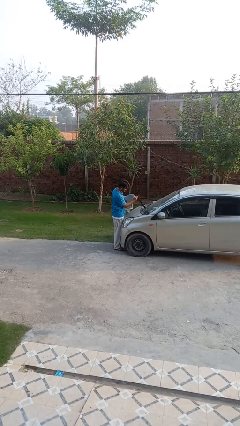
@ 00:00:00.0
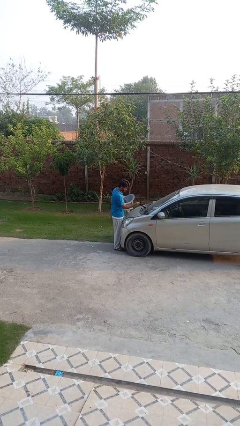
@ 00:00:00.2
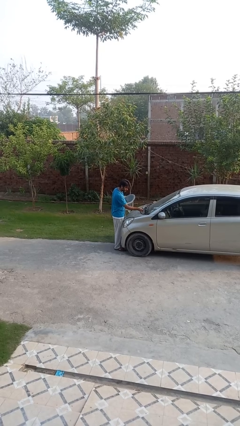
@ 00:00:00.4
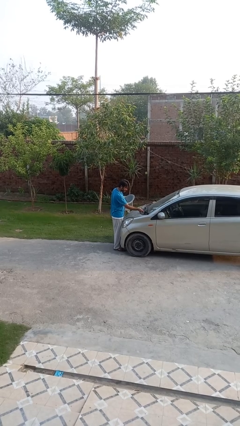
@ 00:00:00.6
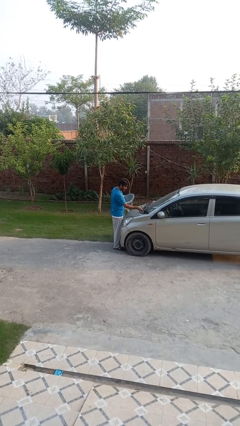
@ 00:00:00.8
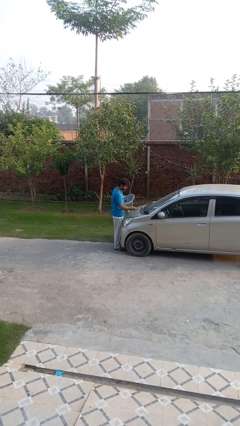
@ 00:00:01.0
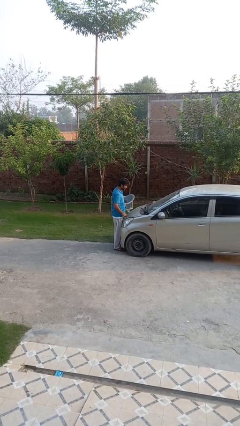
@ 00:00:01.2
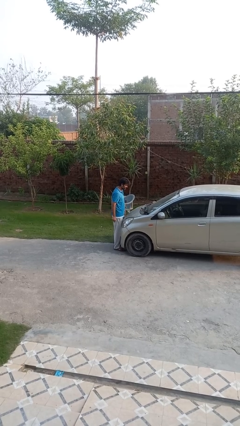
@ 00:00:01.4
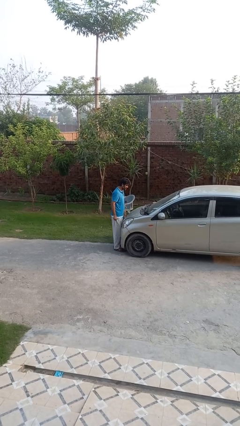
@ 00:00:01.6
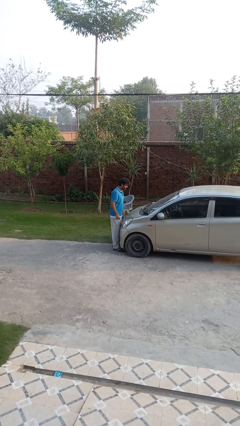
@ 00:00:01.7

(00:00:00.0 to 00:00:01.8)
person flips down car wipers

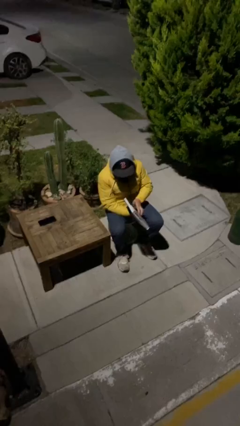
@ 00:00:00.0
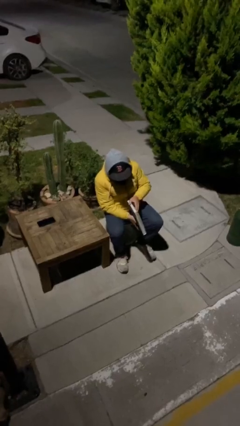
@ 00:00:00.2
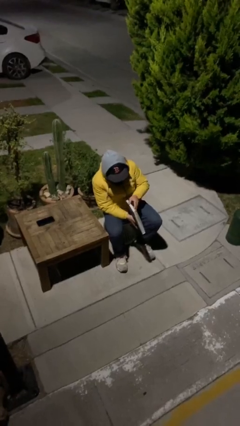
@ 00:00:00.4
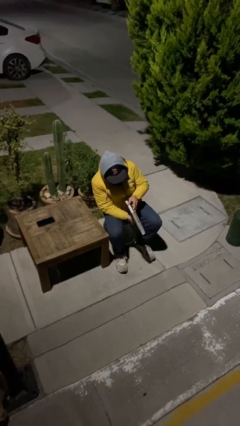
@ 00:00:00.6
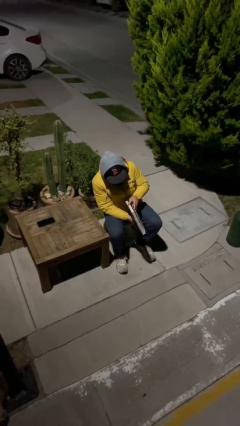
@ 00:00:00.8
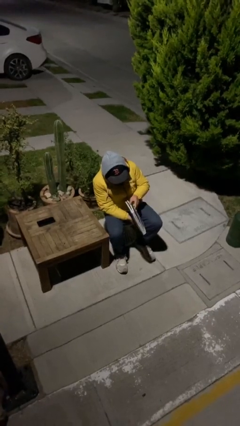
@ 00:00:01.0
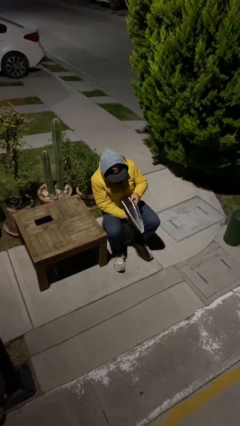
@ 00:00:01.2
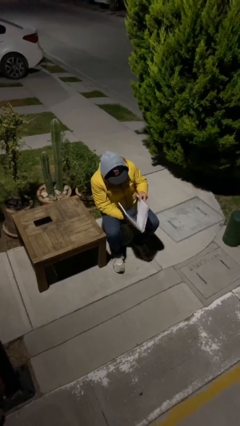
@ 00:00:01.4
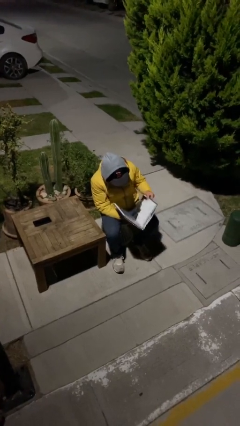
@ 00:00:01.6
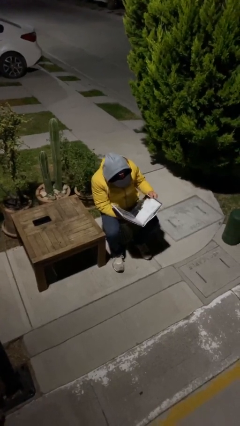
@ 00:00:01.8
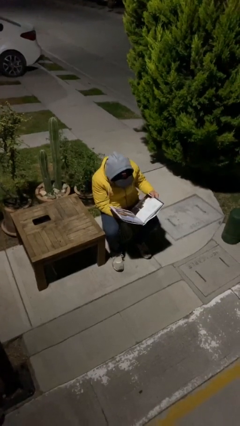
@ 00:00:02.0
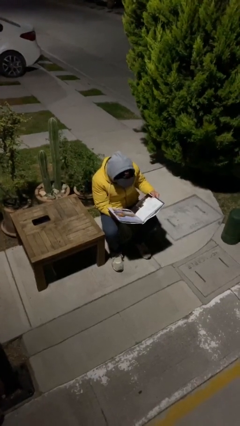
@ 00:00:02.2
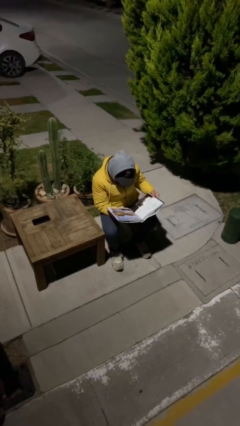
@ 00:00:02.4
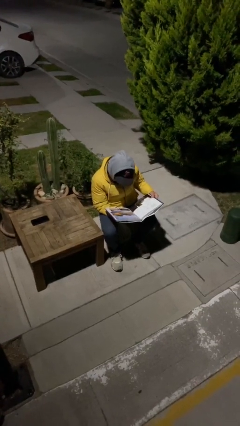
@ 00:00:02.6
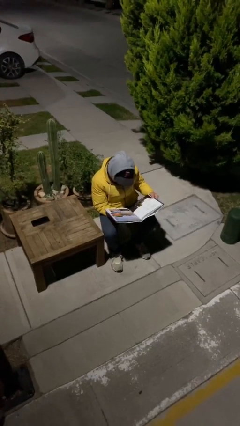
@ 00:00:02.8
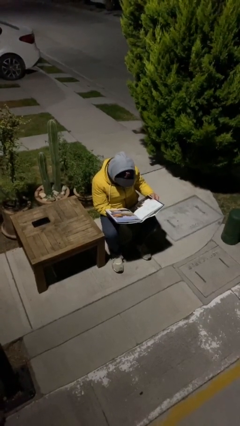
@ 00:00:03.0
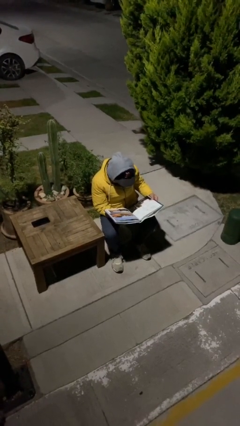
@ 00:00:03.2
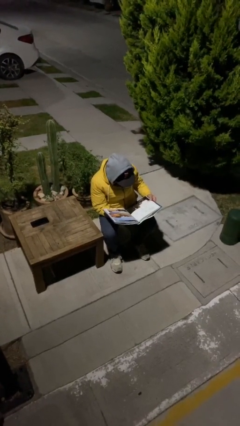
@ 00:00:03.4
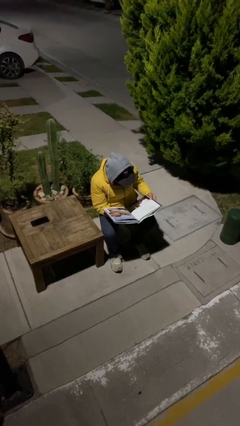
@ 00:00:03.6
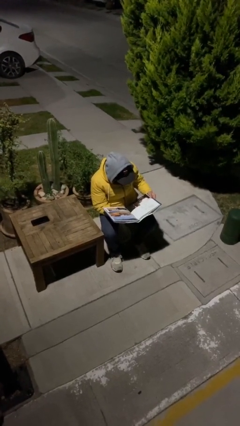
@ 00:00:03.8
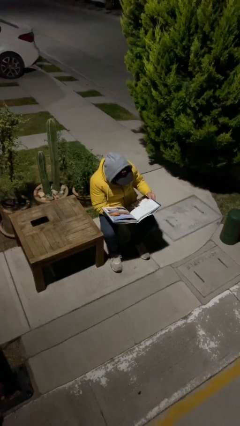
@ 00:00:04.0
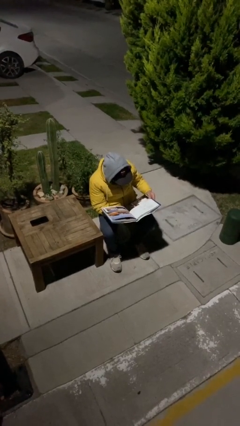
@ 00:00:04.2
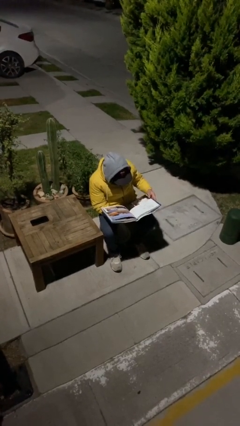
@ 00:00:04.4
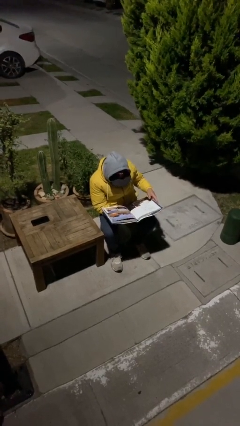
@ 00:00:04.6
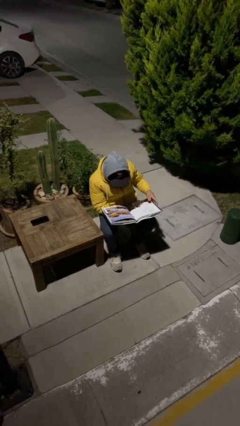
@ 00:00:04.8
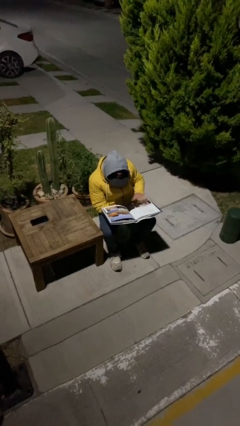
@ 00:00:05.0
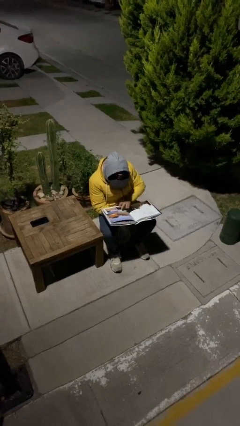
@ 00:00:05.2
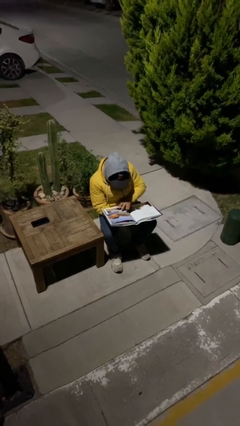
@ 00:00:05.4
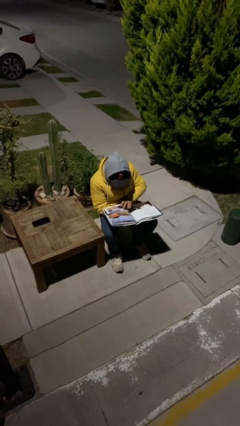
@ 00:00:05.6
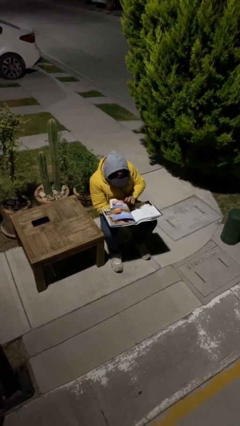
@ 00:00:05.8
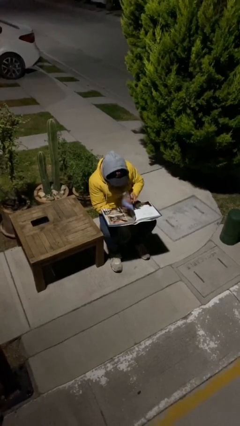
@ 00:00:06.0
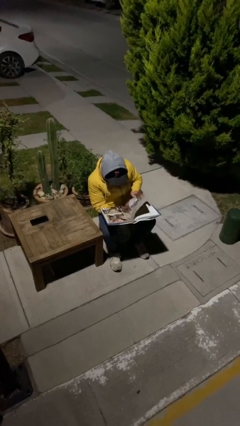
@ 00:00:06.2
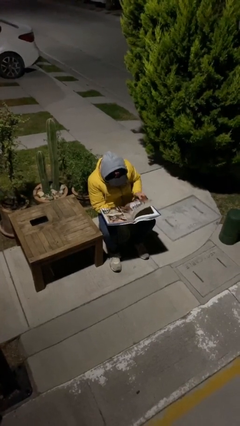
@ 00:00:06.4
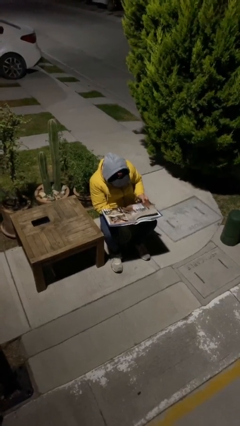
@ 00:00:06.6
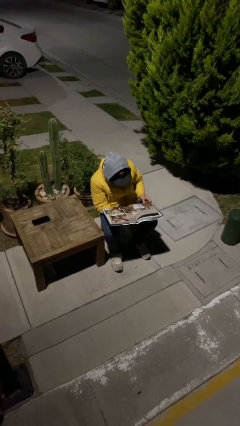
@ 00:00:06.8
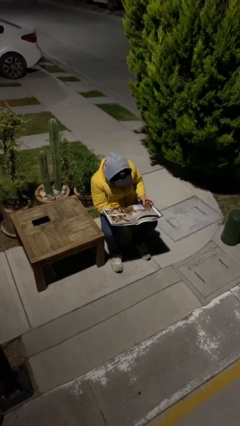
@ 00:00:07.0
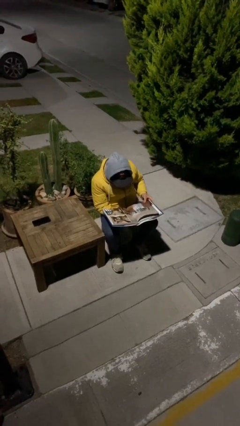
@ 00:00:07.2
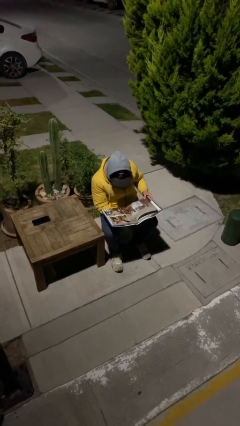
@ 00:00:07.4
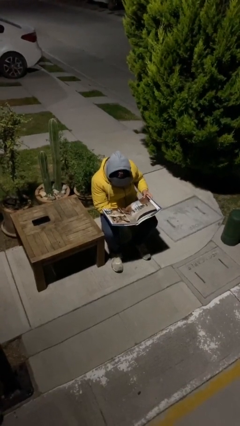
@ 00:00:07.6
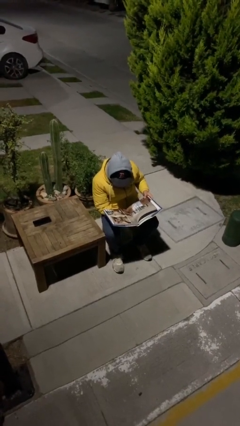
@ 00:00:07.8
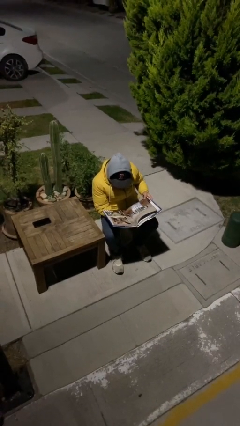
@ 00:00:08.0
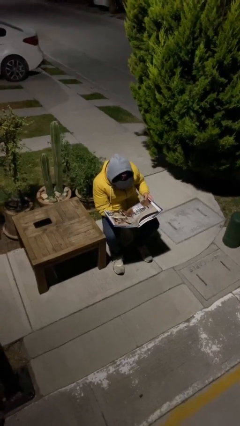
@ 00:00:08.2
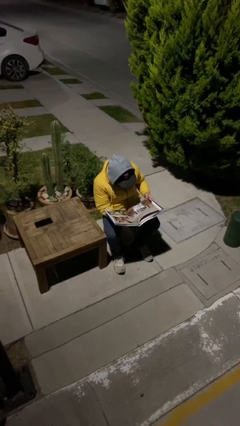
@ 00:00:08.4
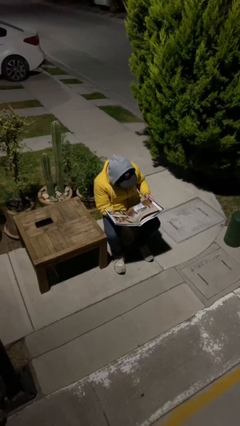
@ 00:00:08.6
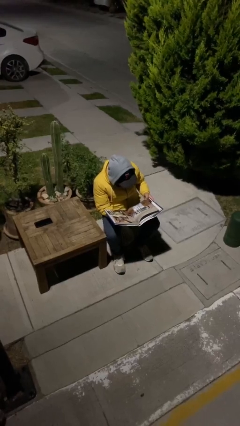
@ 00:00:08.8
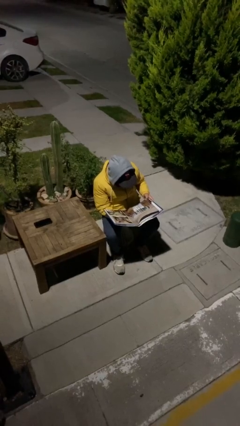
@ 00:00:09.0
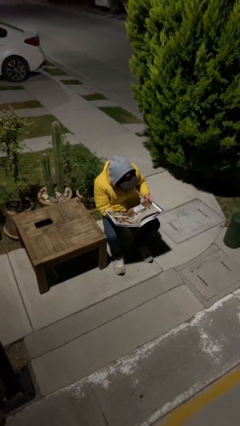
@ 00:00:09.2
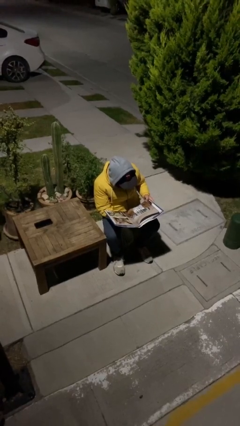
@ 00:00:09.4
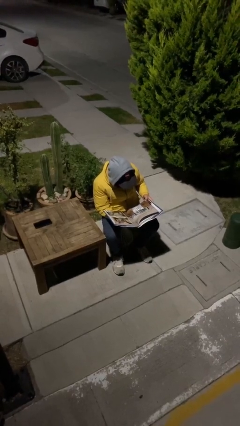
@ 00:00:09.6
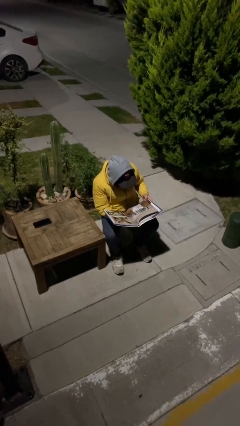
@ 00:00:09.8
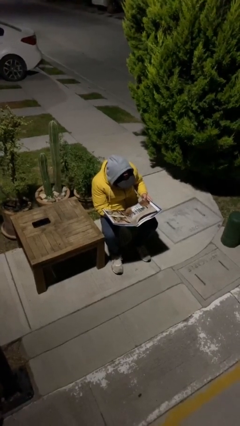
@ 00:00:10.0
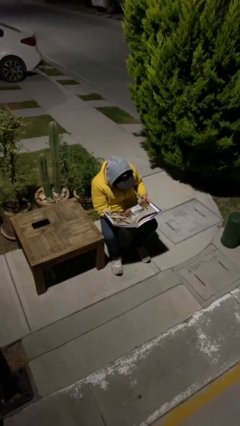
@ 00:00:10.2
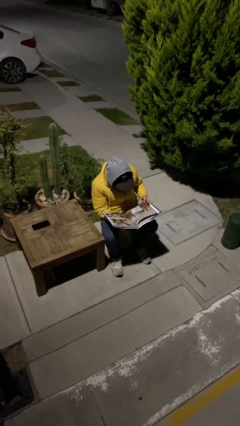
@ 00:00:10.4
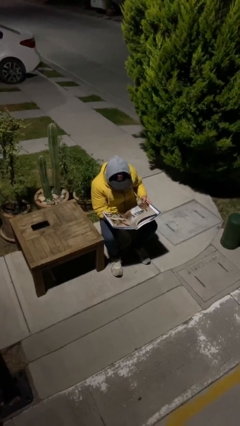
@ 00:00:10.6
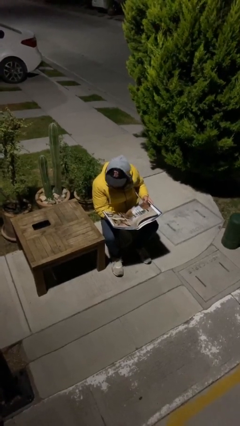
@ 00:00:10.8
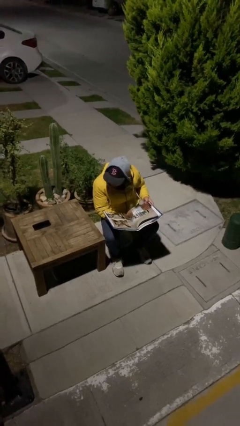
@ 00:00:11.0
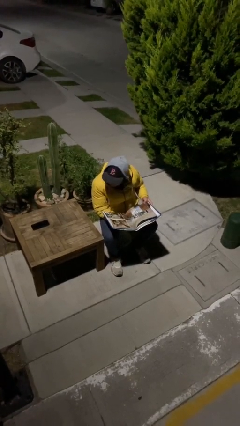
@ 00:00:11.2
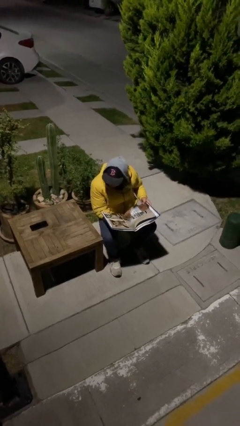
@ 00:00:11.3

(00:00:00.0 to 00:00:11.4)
person reads document

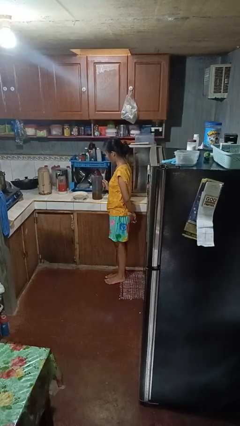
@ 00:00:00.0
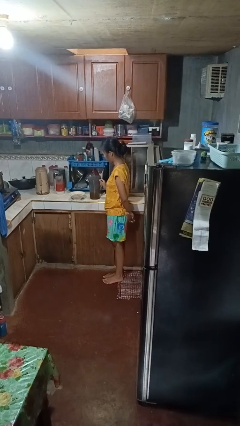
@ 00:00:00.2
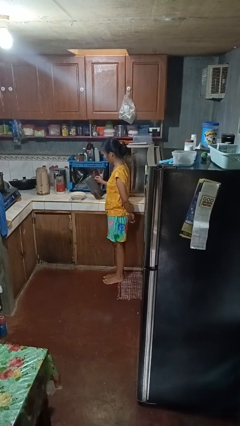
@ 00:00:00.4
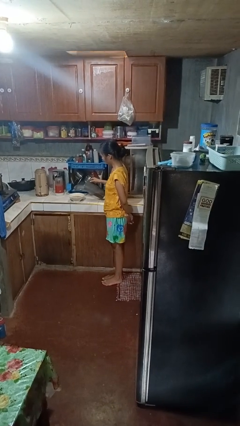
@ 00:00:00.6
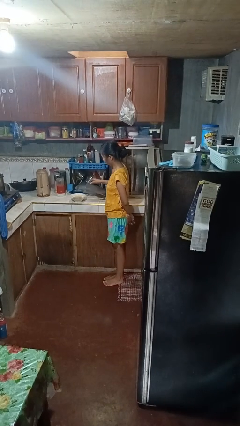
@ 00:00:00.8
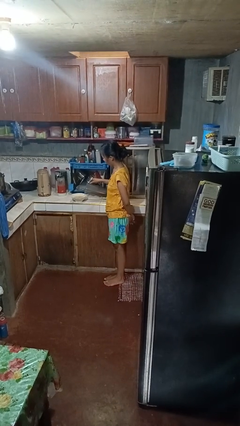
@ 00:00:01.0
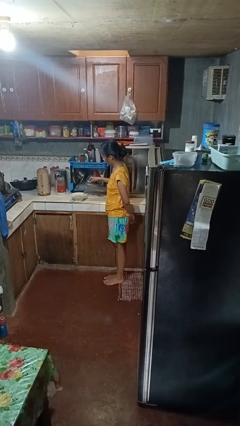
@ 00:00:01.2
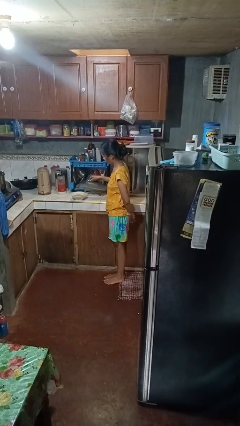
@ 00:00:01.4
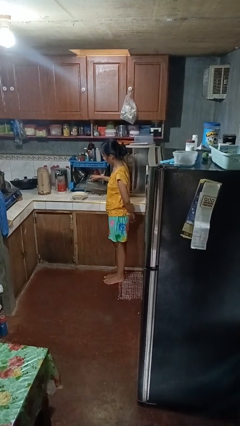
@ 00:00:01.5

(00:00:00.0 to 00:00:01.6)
person pours into bowl

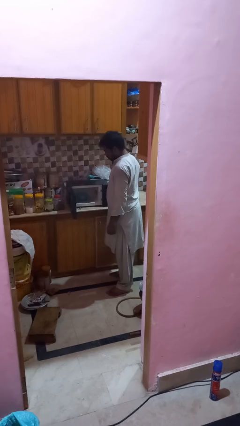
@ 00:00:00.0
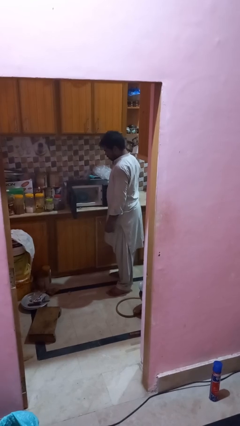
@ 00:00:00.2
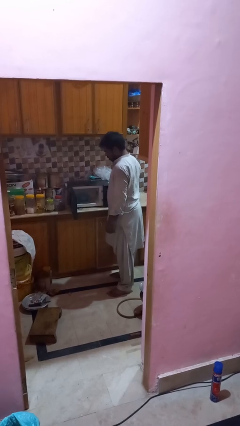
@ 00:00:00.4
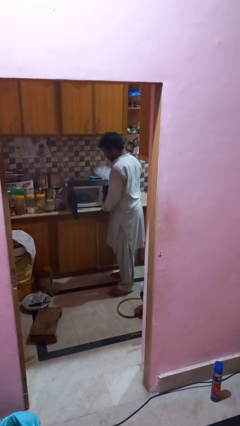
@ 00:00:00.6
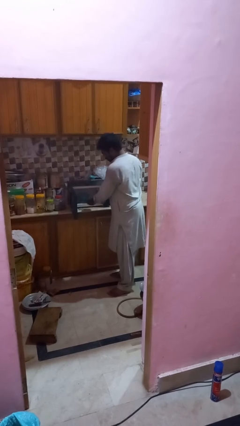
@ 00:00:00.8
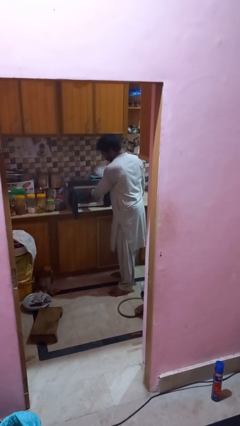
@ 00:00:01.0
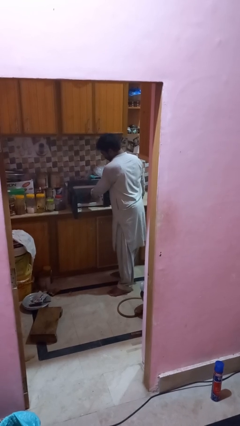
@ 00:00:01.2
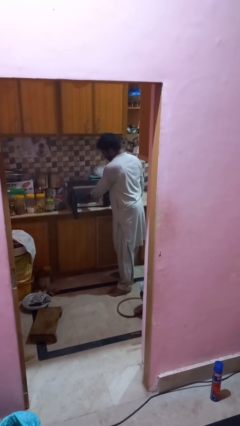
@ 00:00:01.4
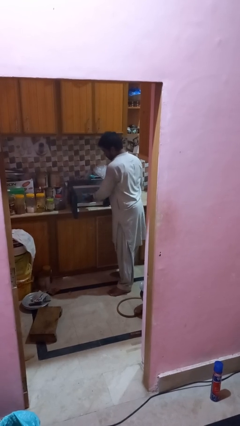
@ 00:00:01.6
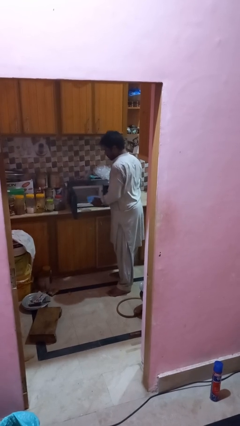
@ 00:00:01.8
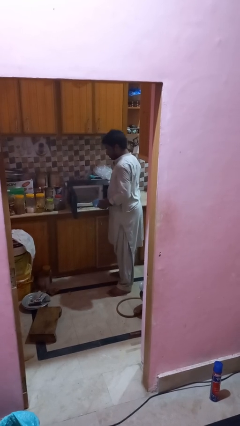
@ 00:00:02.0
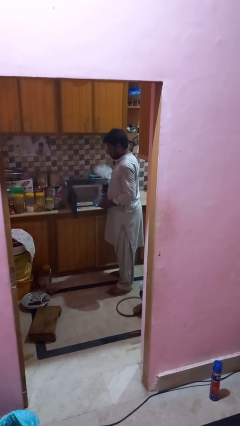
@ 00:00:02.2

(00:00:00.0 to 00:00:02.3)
person takes object from microwave

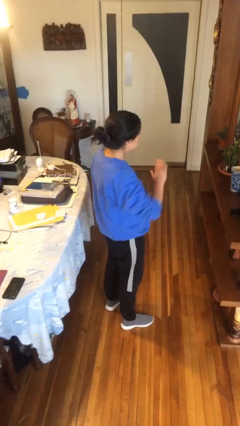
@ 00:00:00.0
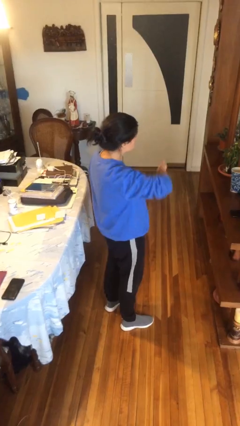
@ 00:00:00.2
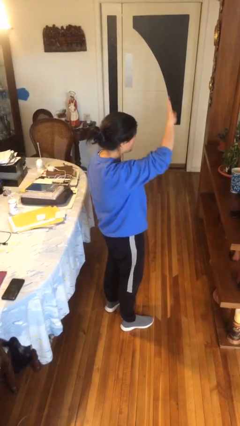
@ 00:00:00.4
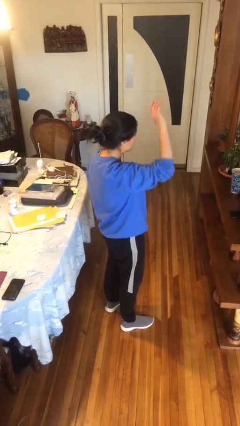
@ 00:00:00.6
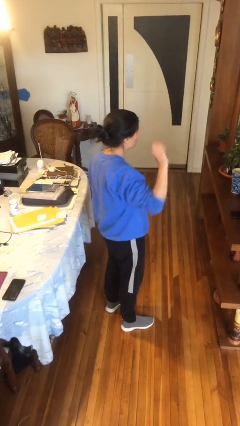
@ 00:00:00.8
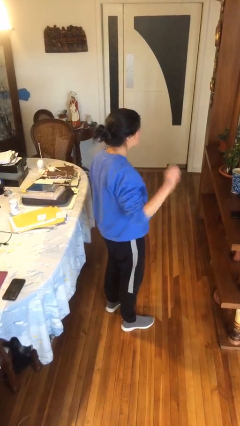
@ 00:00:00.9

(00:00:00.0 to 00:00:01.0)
person gestures swipe up
